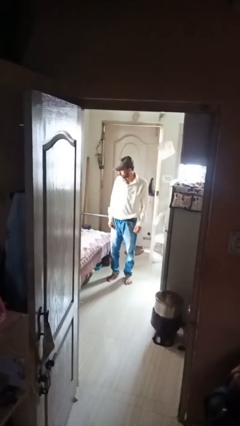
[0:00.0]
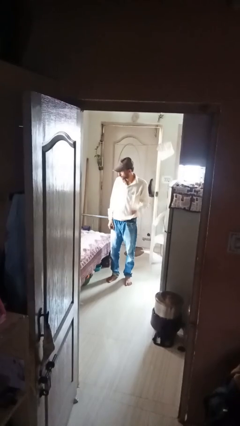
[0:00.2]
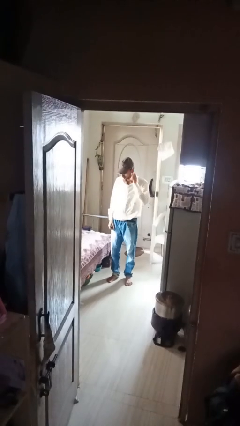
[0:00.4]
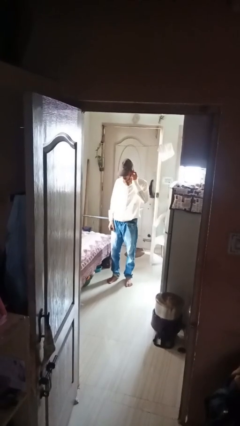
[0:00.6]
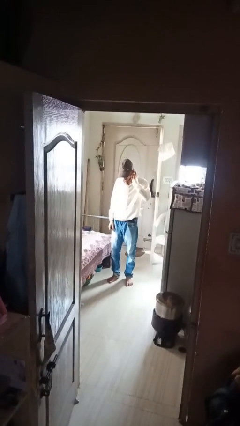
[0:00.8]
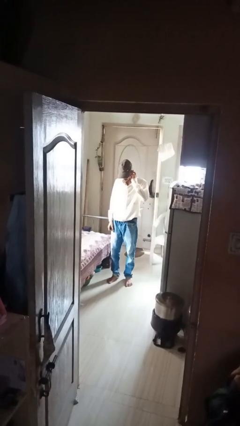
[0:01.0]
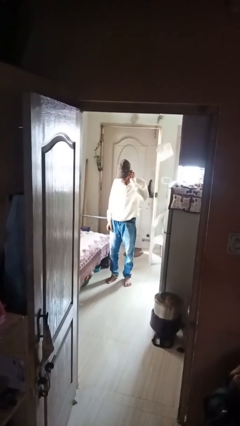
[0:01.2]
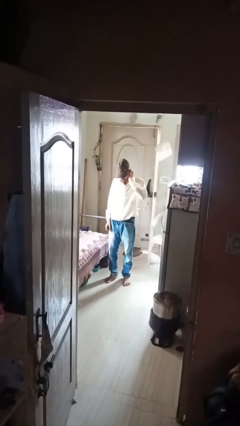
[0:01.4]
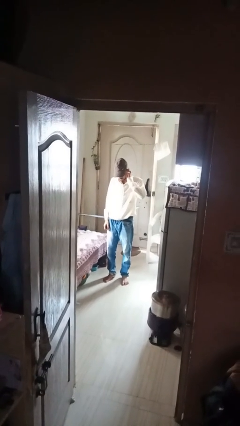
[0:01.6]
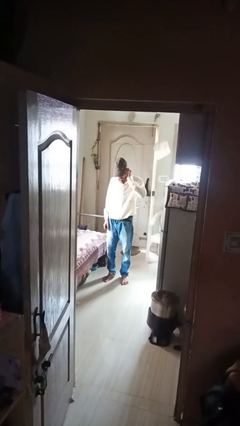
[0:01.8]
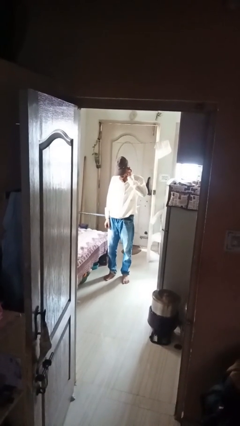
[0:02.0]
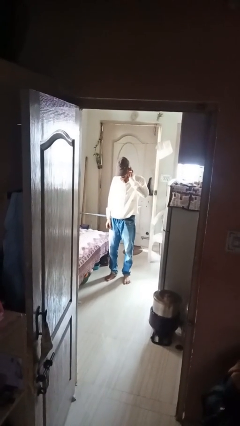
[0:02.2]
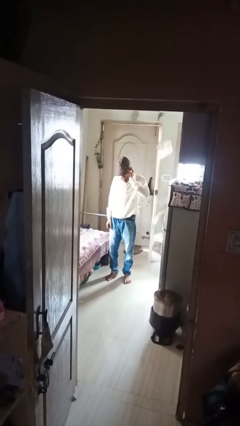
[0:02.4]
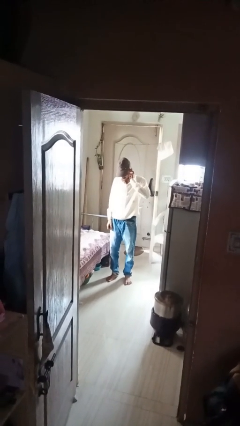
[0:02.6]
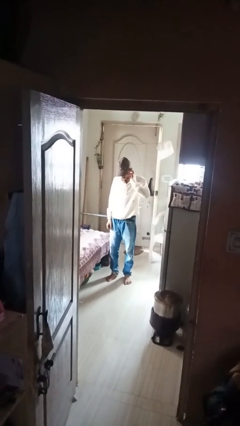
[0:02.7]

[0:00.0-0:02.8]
person touches earlobe

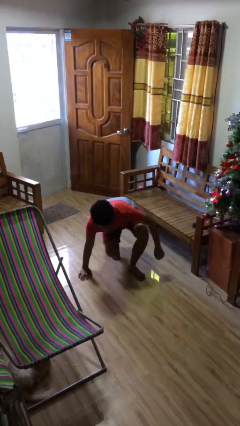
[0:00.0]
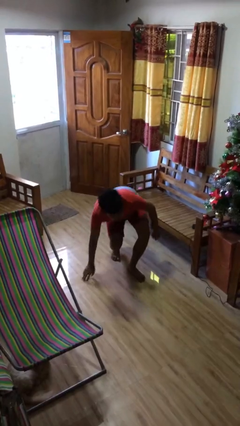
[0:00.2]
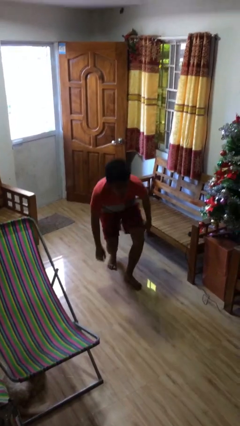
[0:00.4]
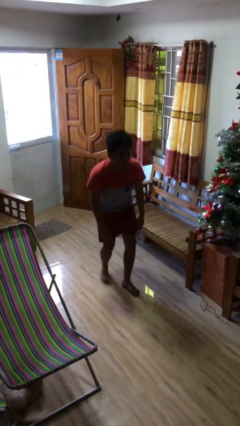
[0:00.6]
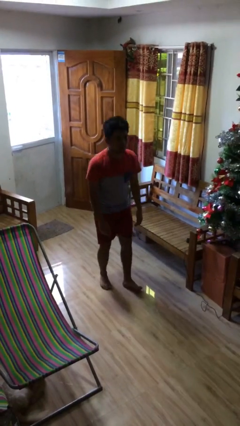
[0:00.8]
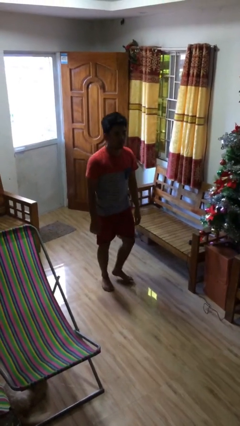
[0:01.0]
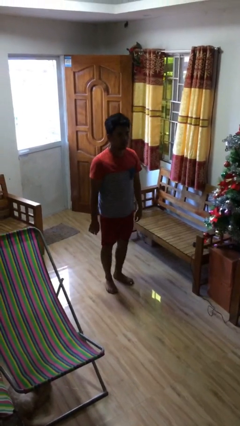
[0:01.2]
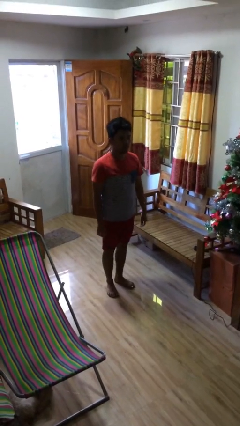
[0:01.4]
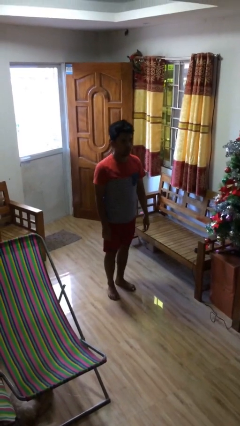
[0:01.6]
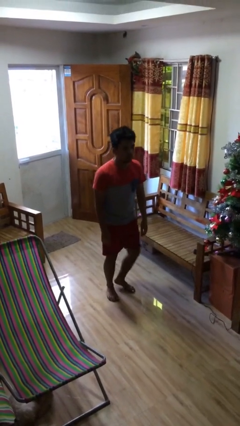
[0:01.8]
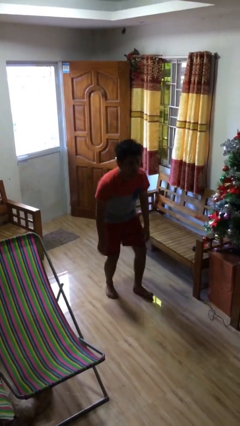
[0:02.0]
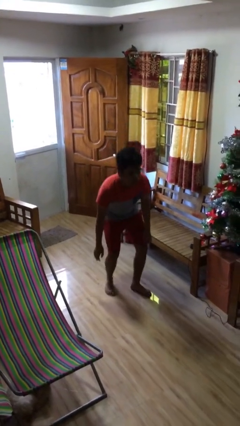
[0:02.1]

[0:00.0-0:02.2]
person stands up

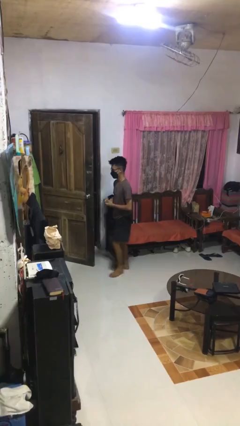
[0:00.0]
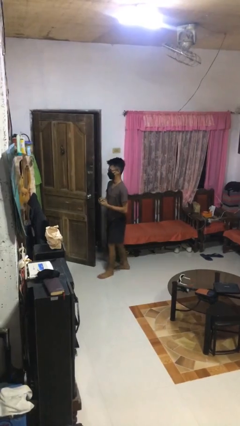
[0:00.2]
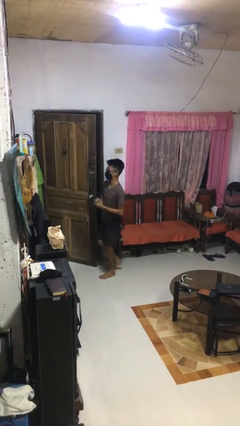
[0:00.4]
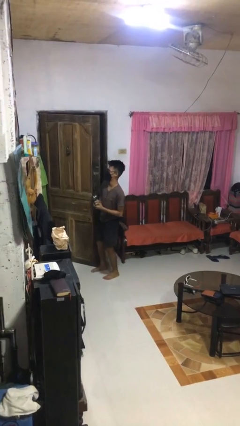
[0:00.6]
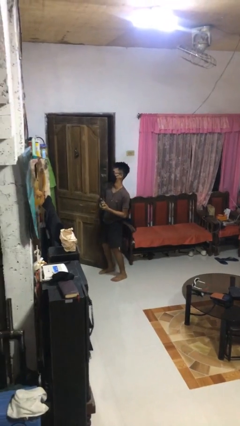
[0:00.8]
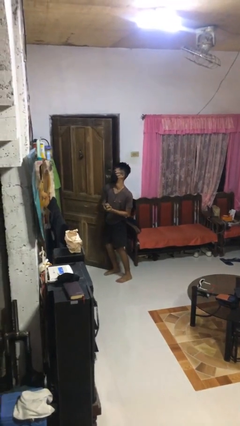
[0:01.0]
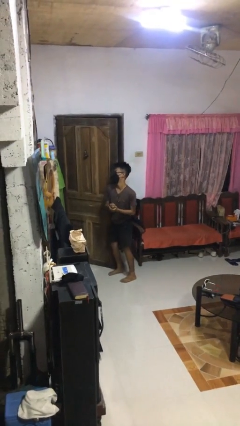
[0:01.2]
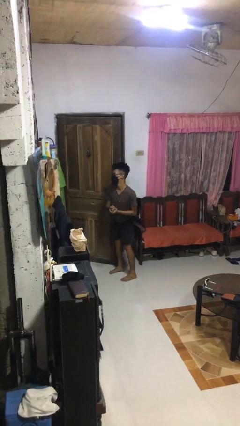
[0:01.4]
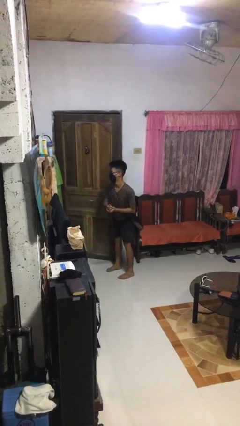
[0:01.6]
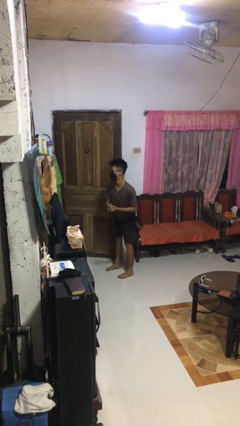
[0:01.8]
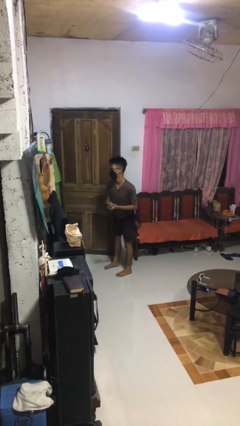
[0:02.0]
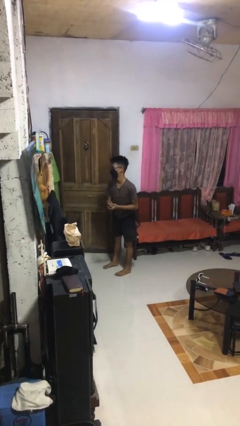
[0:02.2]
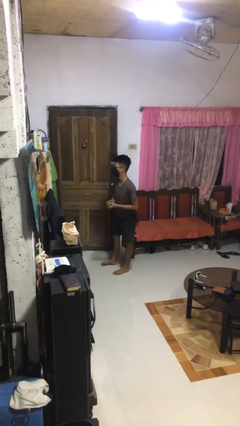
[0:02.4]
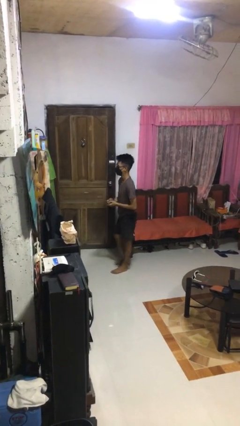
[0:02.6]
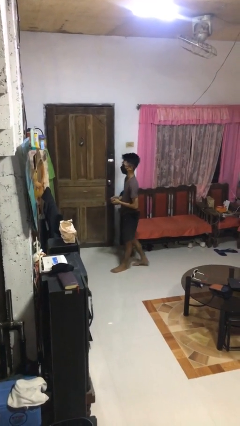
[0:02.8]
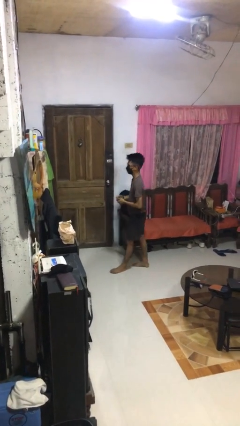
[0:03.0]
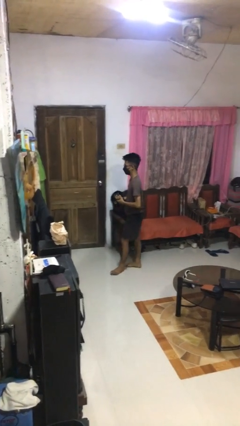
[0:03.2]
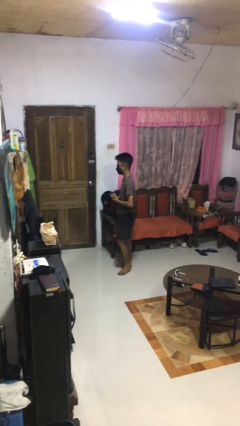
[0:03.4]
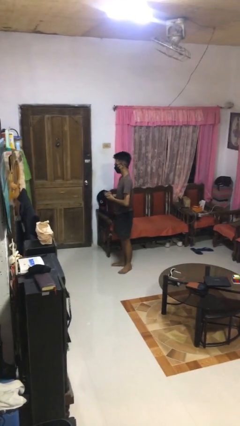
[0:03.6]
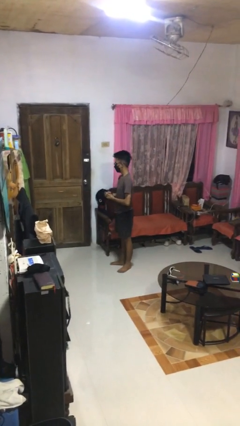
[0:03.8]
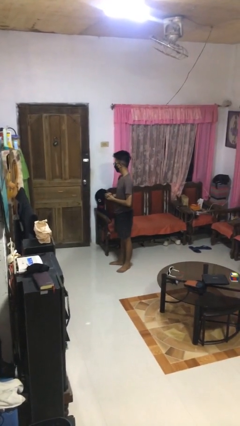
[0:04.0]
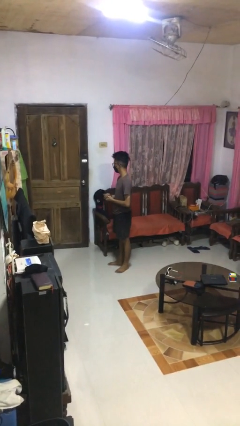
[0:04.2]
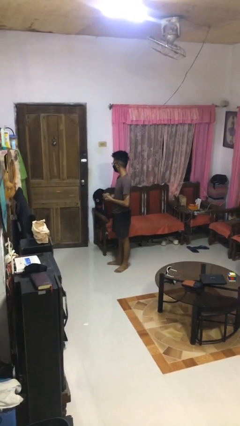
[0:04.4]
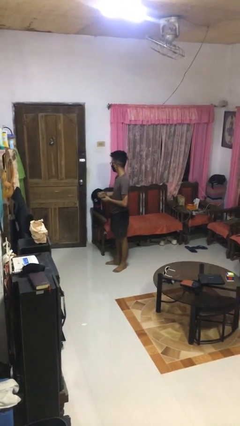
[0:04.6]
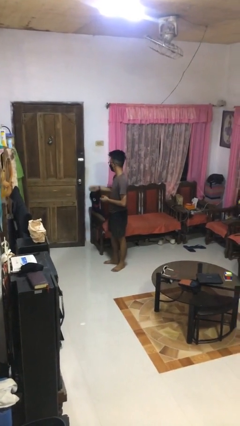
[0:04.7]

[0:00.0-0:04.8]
person closes door with hip

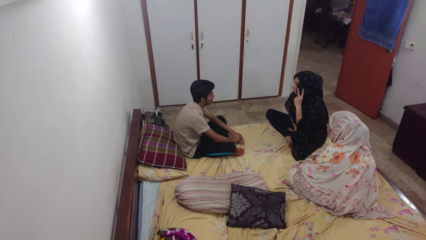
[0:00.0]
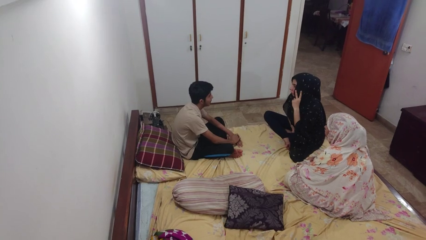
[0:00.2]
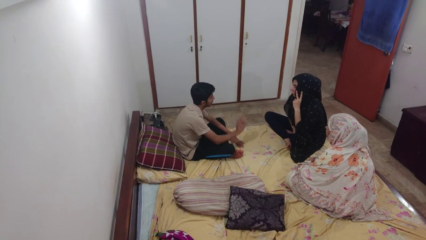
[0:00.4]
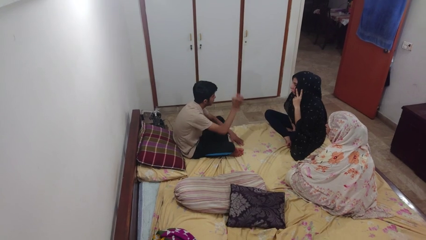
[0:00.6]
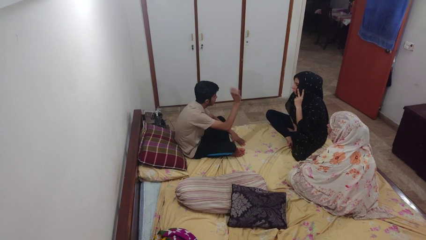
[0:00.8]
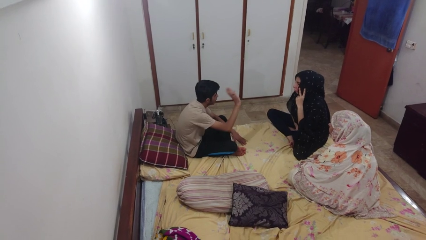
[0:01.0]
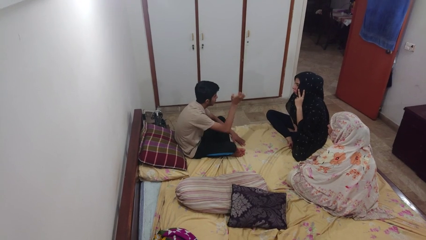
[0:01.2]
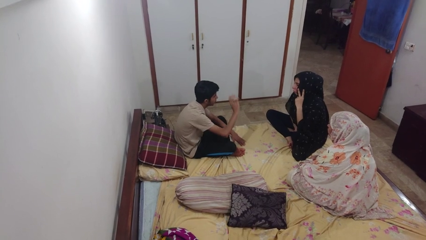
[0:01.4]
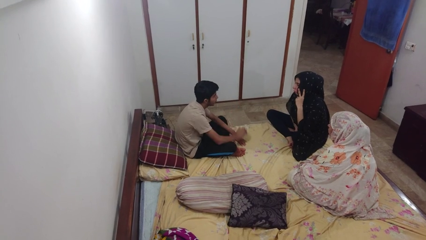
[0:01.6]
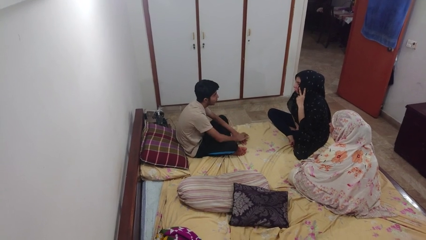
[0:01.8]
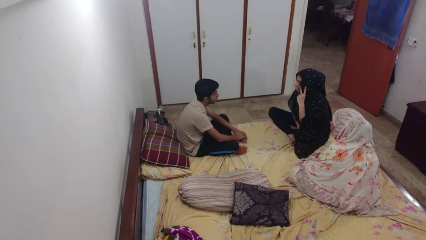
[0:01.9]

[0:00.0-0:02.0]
person waves at person

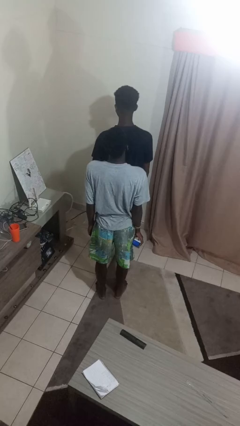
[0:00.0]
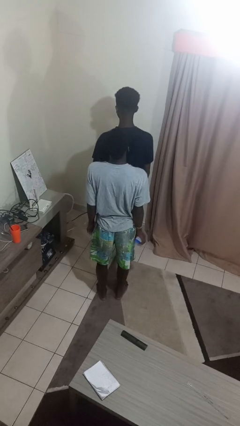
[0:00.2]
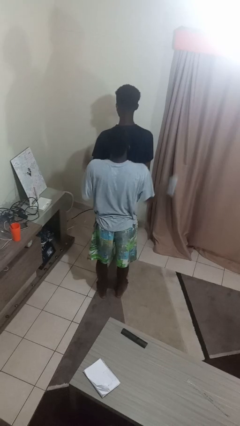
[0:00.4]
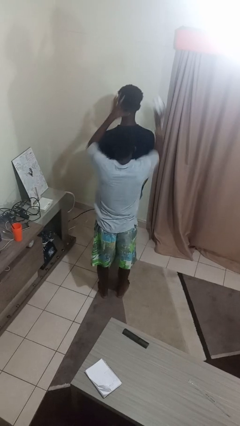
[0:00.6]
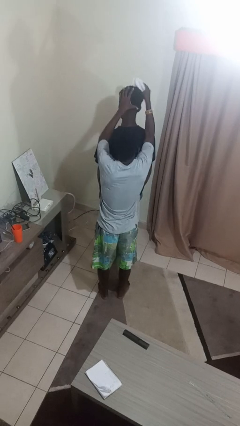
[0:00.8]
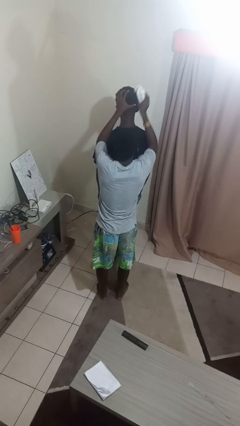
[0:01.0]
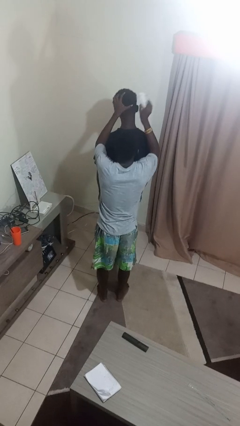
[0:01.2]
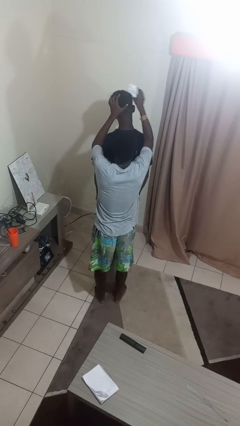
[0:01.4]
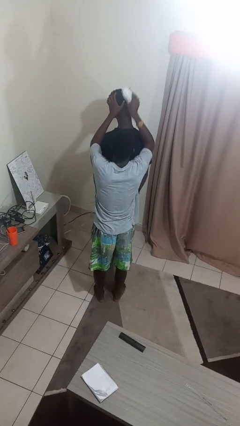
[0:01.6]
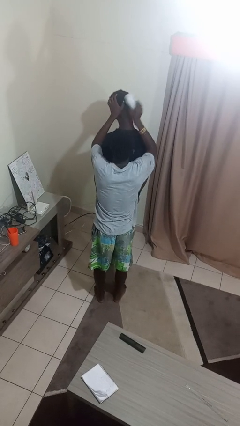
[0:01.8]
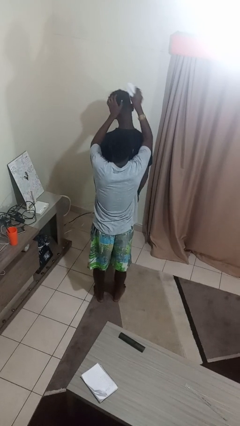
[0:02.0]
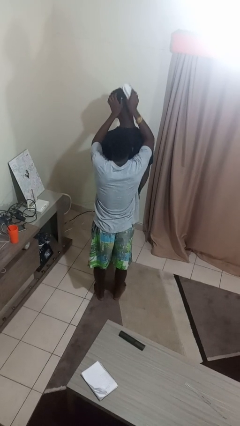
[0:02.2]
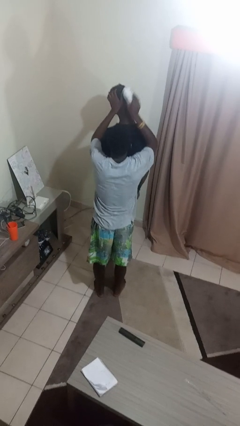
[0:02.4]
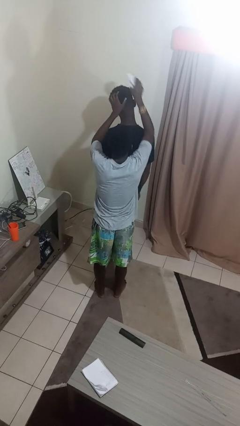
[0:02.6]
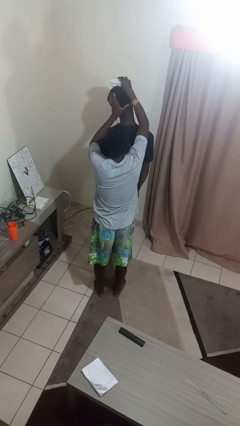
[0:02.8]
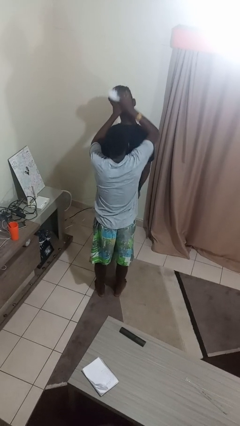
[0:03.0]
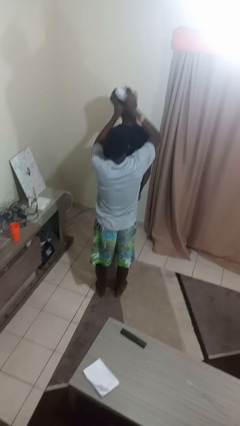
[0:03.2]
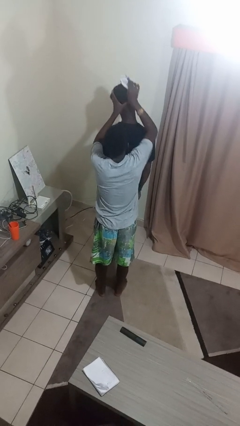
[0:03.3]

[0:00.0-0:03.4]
person brushes hair of person

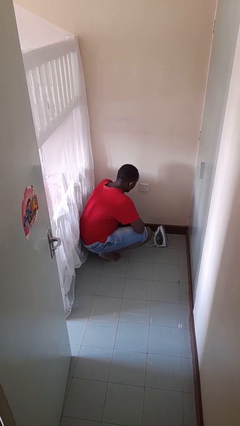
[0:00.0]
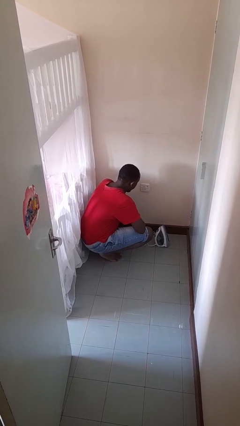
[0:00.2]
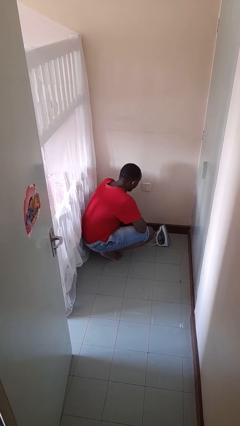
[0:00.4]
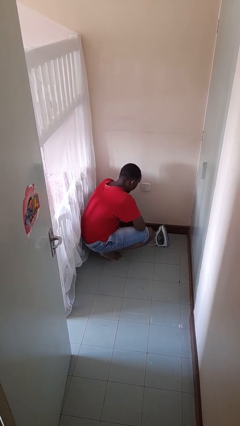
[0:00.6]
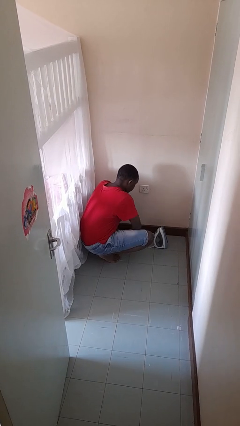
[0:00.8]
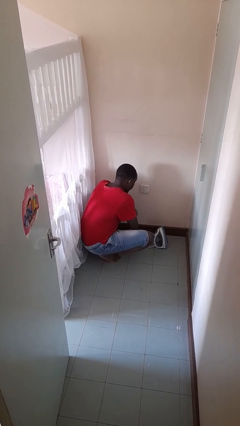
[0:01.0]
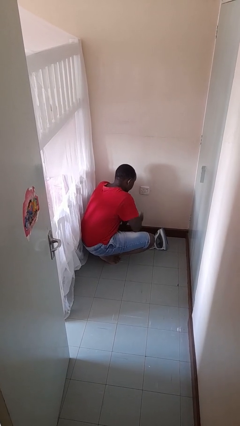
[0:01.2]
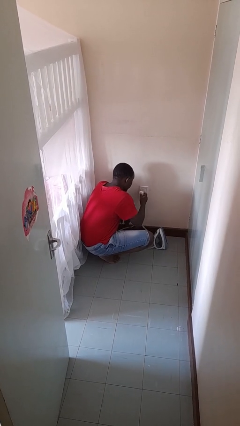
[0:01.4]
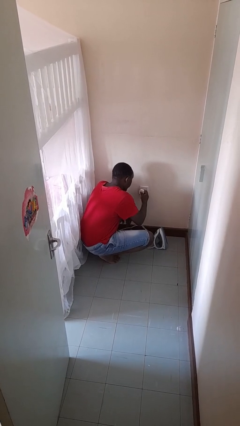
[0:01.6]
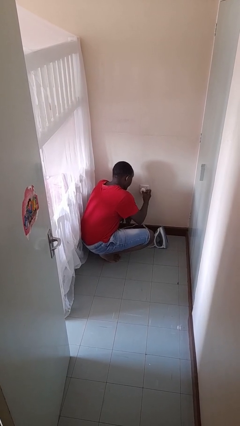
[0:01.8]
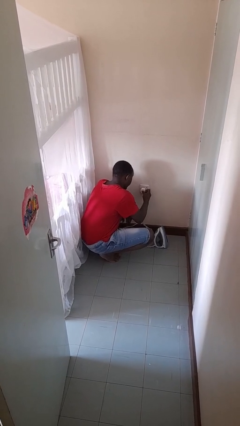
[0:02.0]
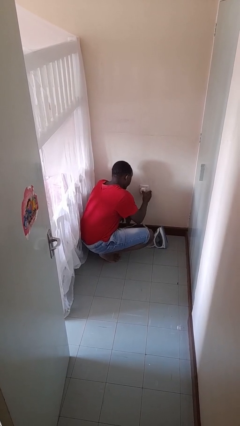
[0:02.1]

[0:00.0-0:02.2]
person plugs into electrical socket

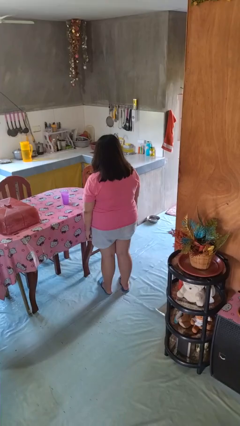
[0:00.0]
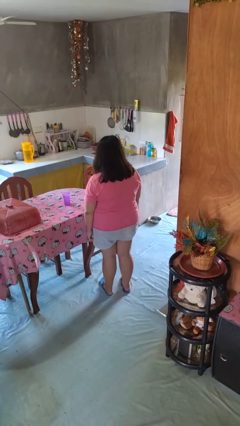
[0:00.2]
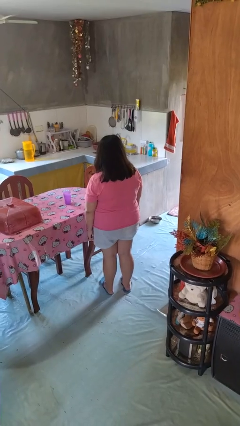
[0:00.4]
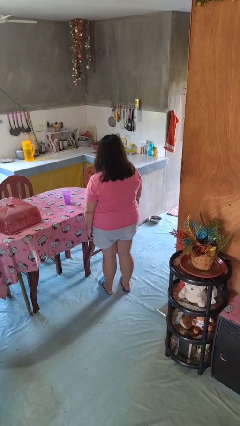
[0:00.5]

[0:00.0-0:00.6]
person knocks over glass
